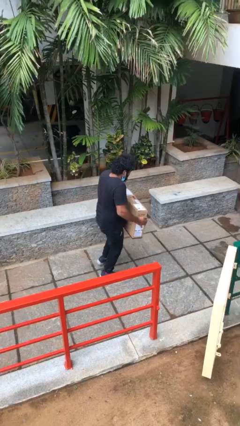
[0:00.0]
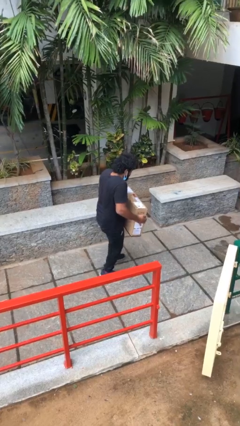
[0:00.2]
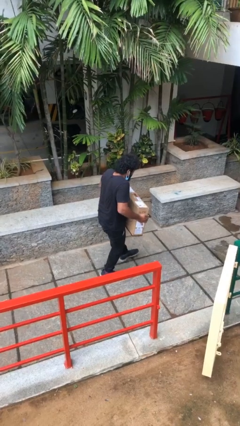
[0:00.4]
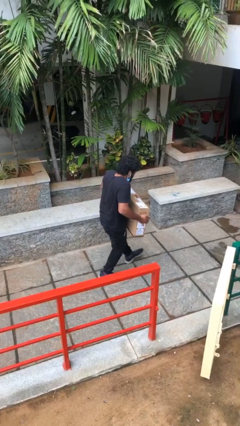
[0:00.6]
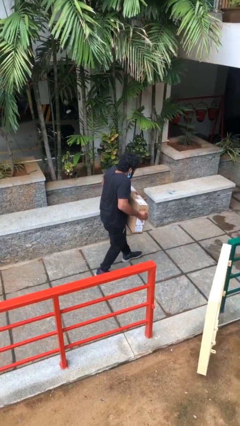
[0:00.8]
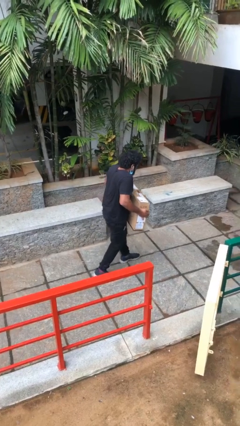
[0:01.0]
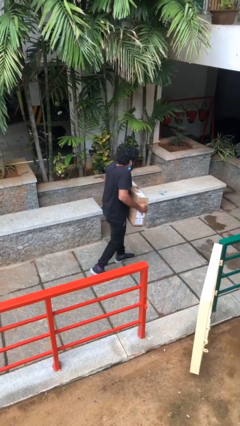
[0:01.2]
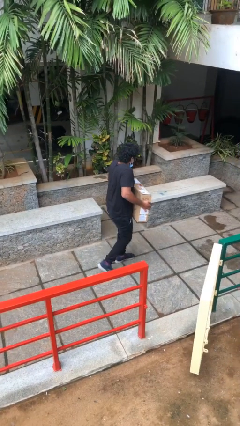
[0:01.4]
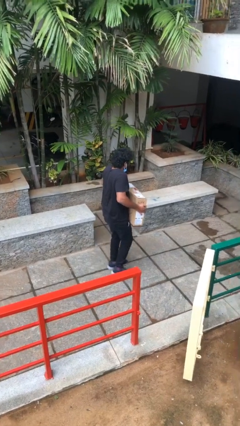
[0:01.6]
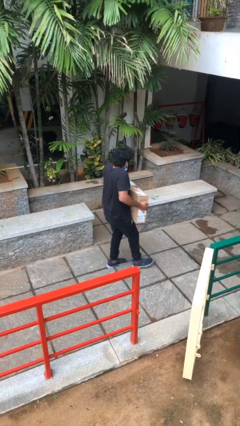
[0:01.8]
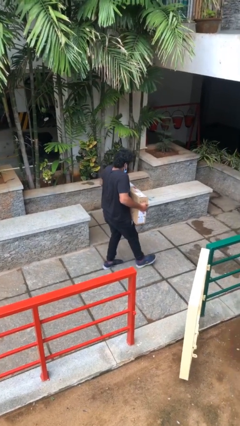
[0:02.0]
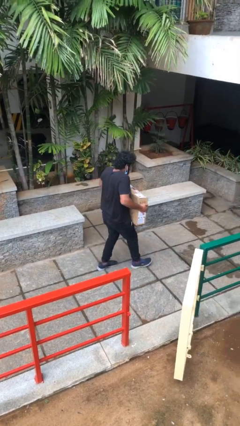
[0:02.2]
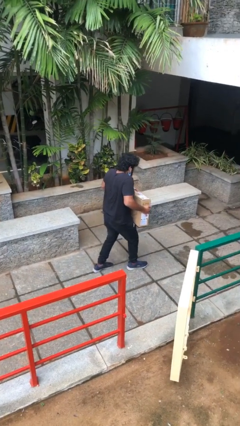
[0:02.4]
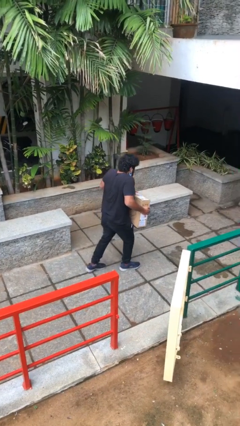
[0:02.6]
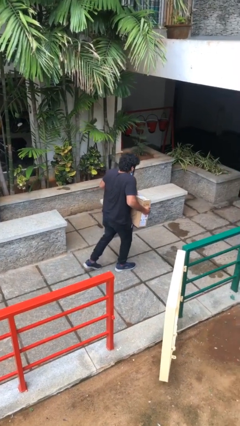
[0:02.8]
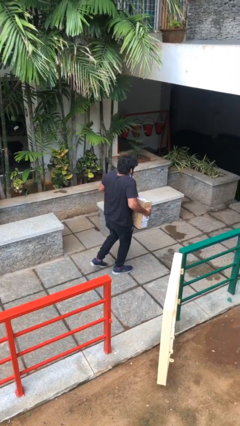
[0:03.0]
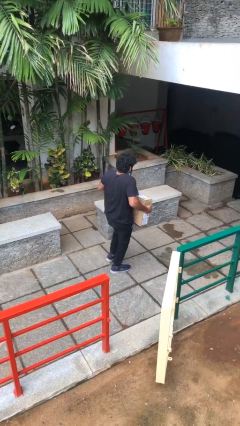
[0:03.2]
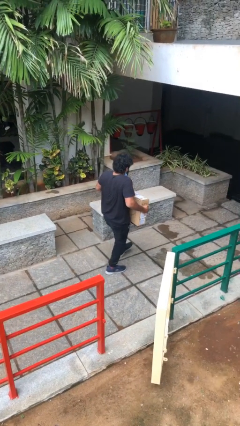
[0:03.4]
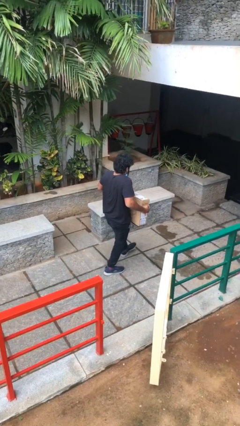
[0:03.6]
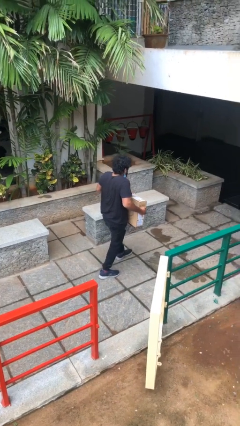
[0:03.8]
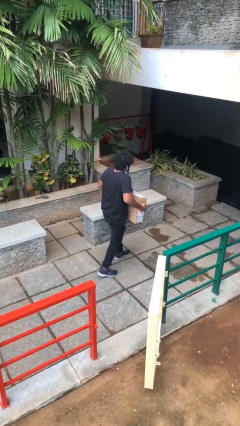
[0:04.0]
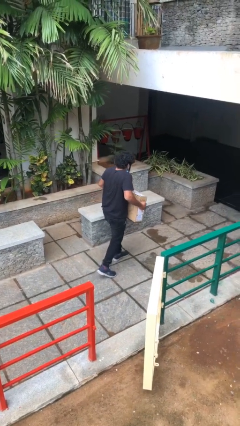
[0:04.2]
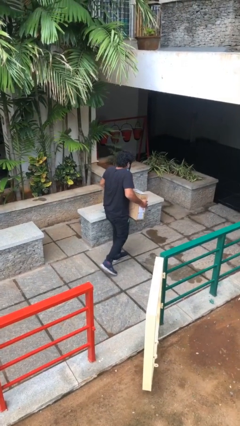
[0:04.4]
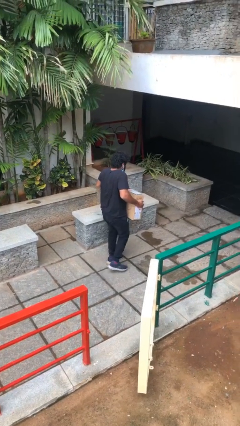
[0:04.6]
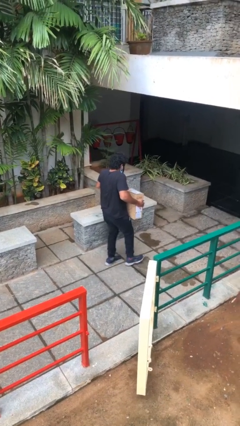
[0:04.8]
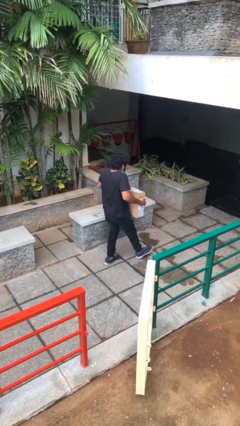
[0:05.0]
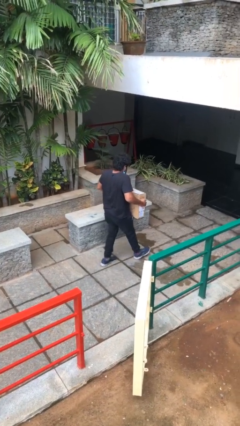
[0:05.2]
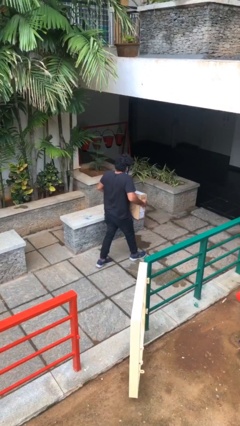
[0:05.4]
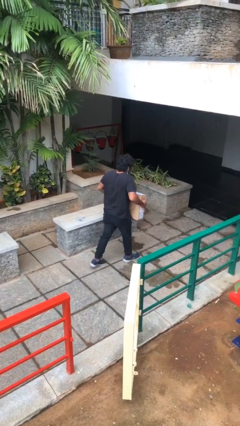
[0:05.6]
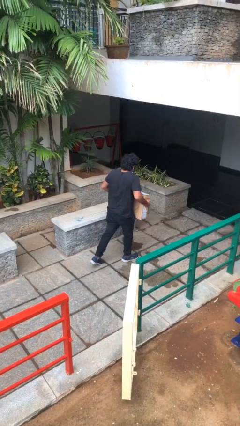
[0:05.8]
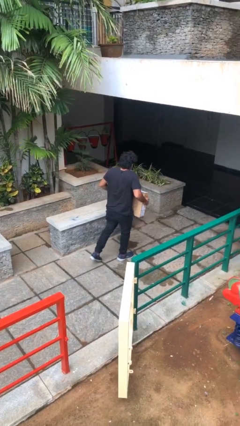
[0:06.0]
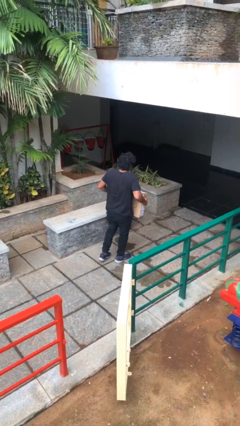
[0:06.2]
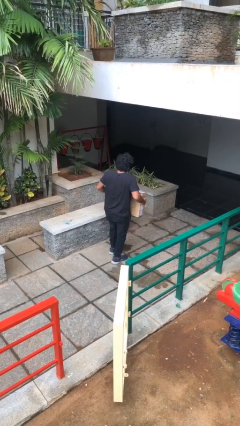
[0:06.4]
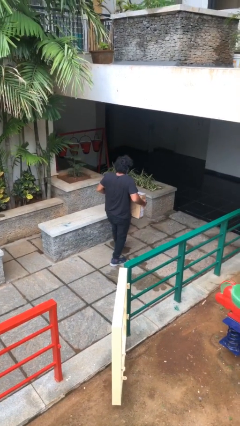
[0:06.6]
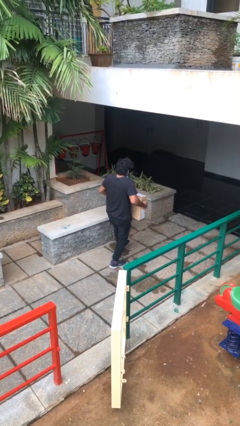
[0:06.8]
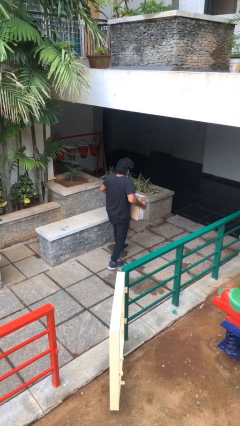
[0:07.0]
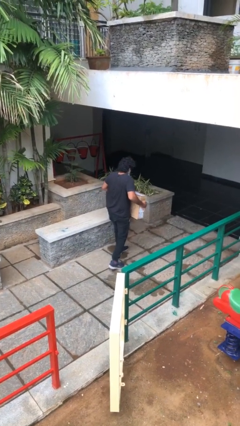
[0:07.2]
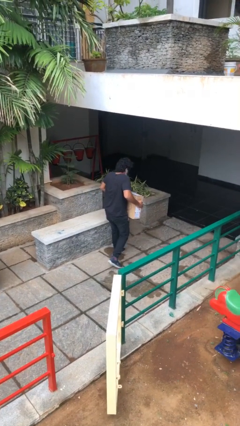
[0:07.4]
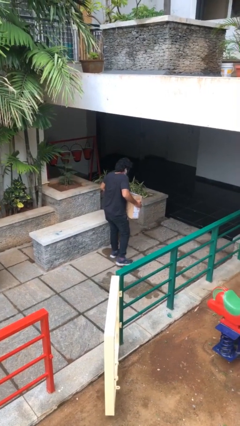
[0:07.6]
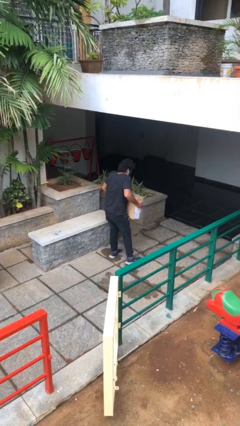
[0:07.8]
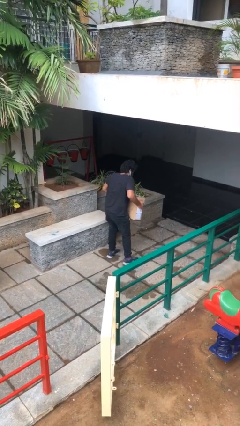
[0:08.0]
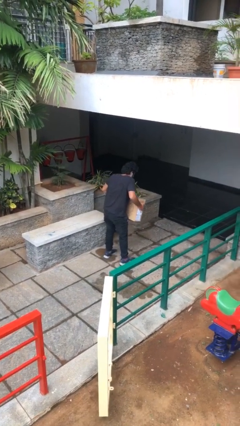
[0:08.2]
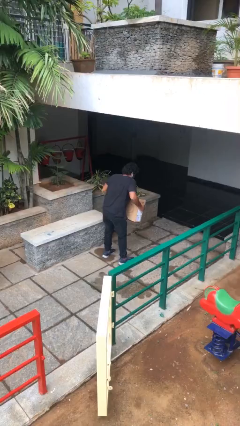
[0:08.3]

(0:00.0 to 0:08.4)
person carries heavy object

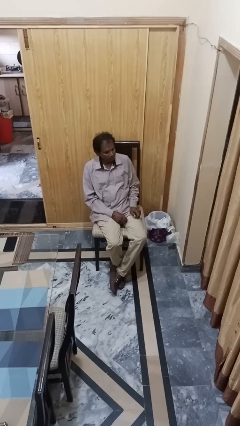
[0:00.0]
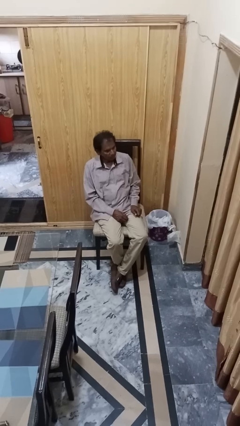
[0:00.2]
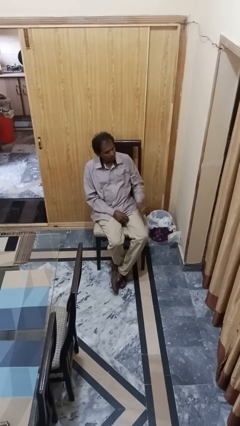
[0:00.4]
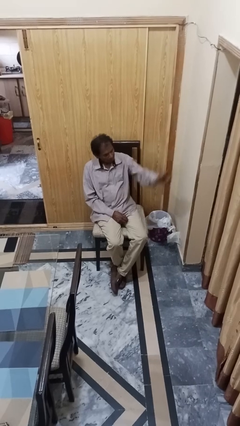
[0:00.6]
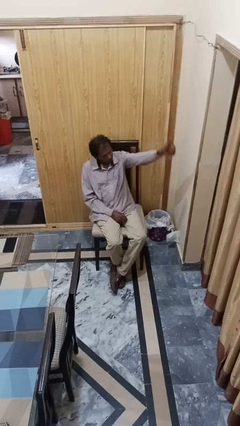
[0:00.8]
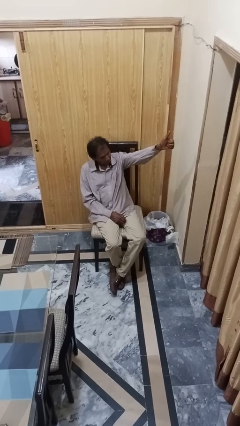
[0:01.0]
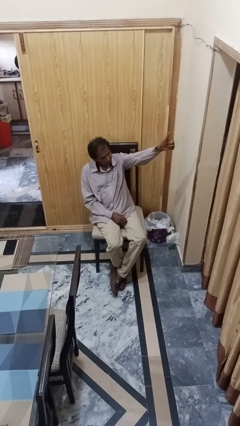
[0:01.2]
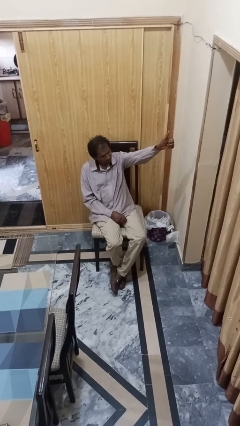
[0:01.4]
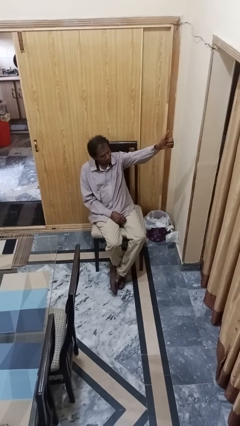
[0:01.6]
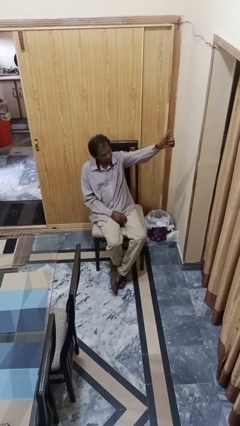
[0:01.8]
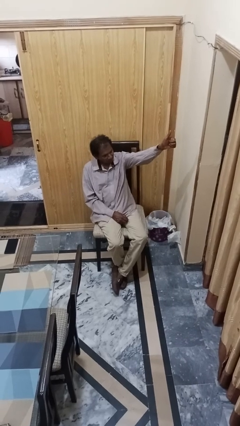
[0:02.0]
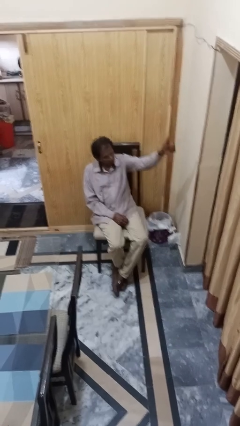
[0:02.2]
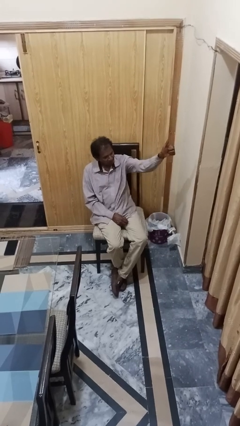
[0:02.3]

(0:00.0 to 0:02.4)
person gestures thumbs up

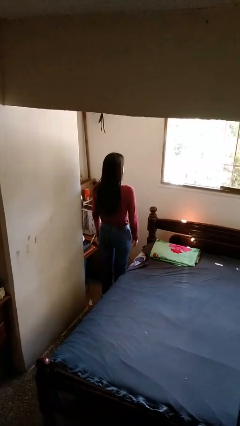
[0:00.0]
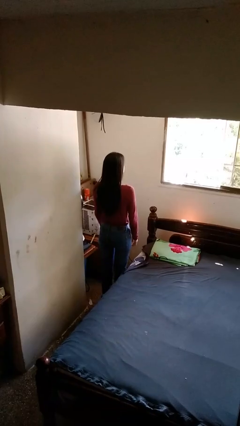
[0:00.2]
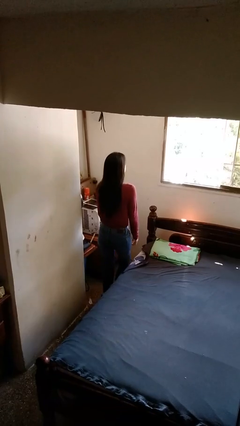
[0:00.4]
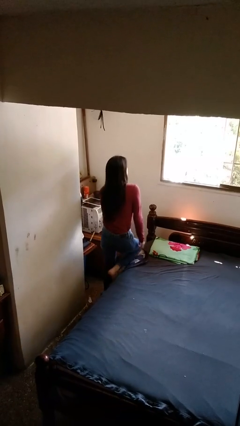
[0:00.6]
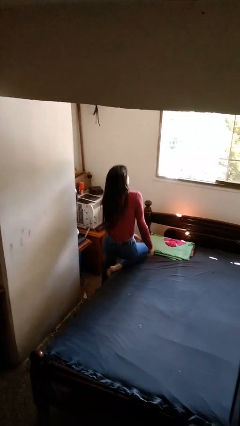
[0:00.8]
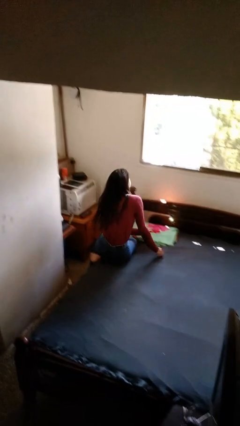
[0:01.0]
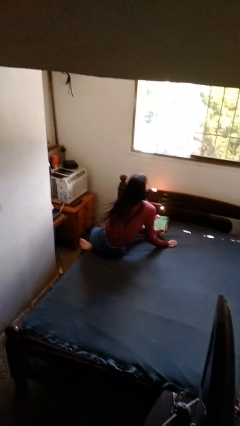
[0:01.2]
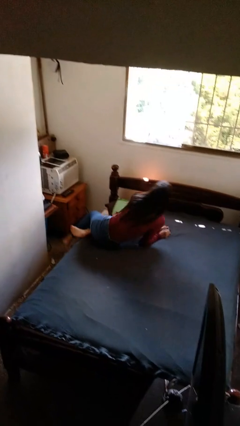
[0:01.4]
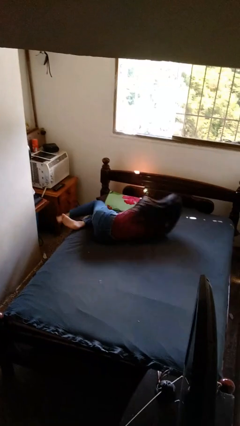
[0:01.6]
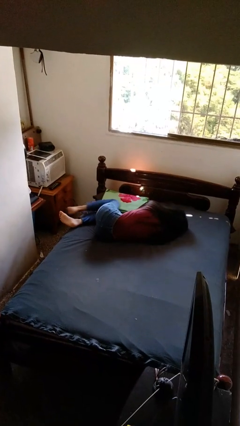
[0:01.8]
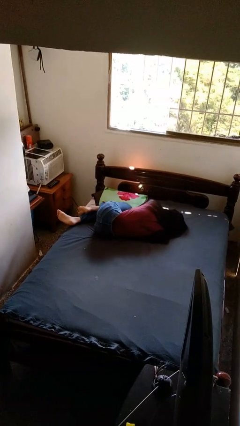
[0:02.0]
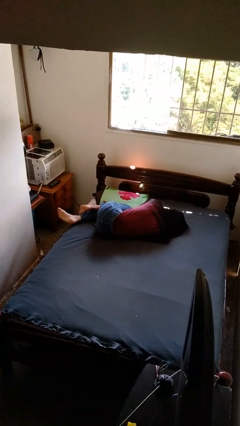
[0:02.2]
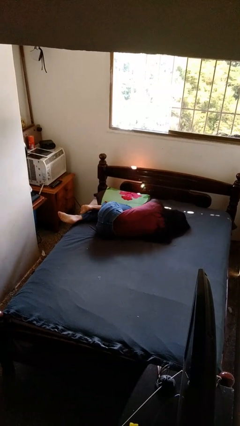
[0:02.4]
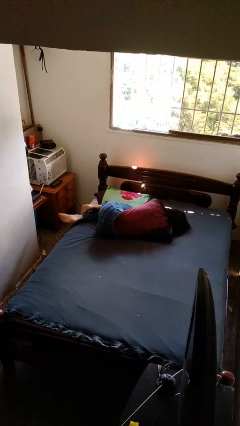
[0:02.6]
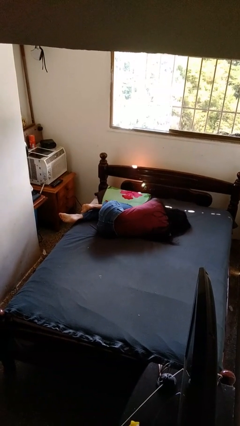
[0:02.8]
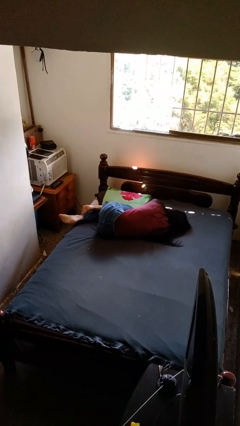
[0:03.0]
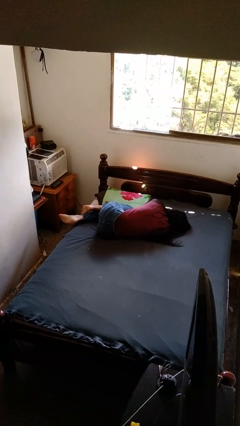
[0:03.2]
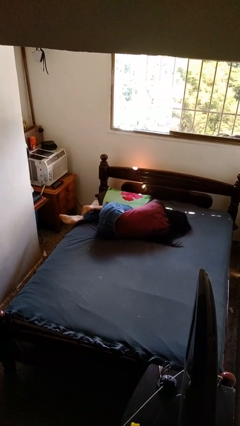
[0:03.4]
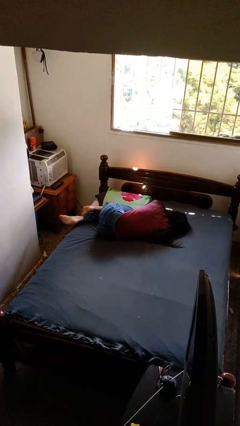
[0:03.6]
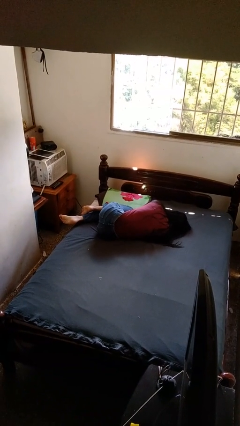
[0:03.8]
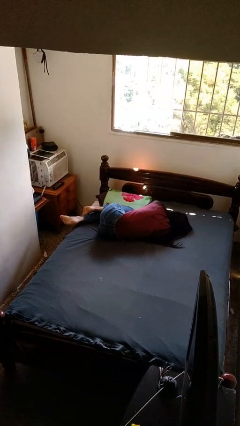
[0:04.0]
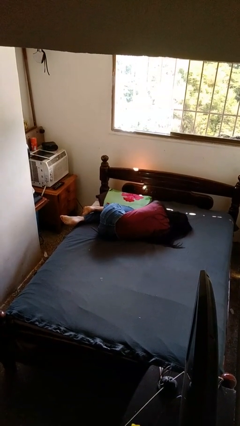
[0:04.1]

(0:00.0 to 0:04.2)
person lies down on bed

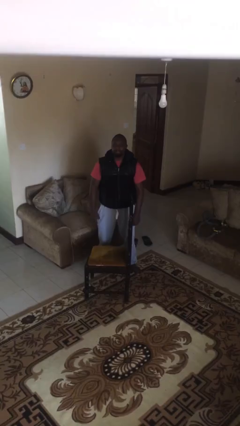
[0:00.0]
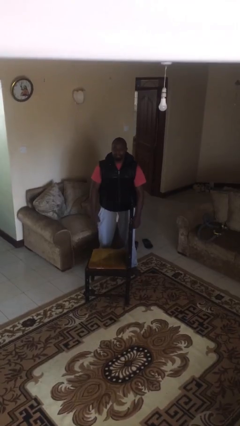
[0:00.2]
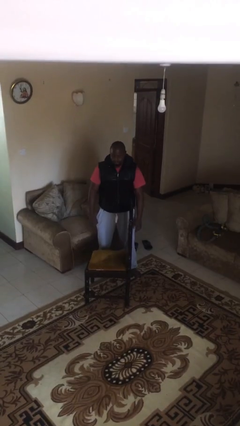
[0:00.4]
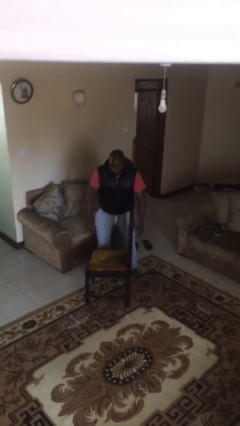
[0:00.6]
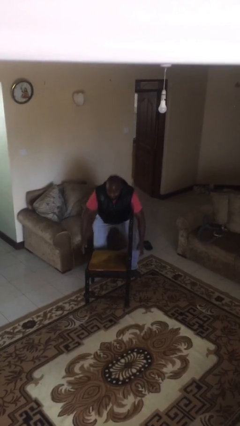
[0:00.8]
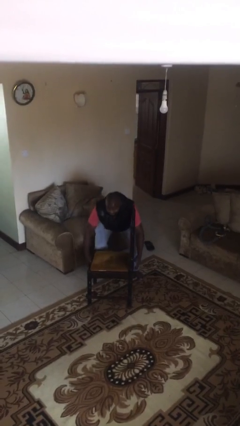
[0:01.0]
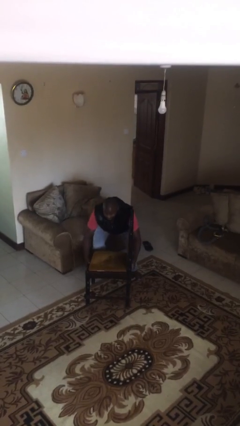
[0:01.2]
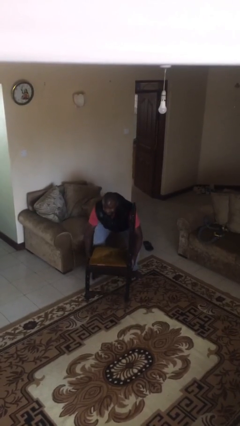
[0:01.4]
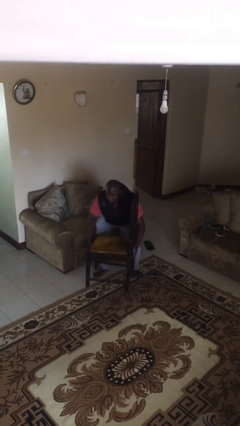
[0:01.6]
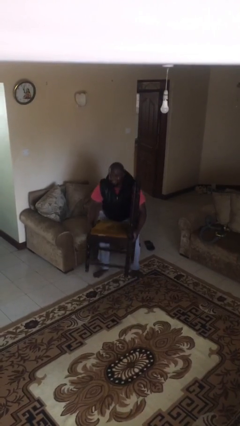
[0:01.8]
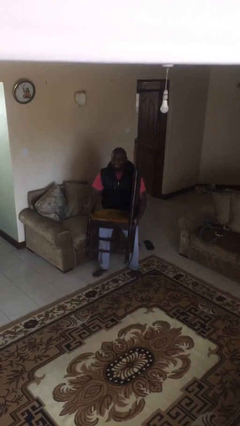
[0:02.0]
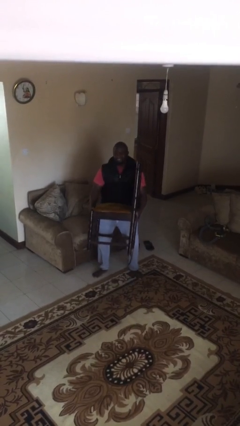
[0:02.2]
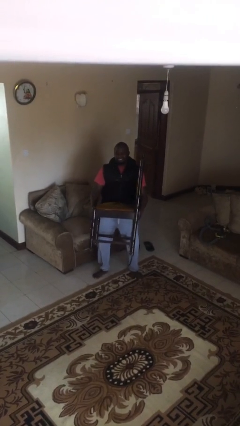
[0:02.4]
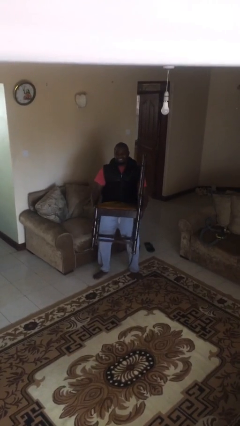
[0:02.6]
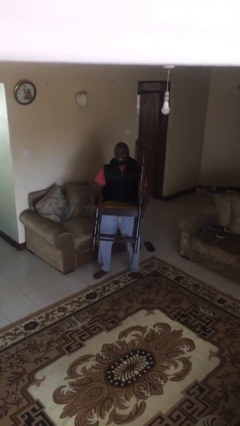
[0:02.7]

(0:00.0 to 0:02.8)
person picks up object from floor
